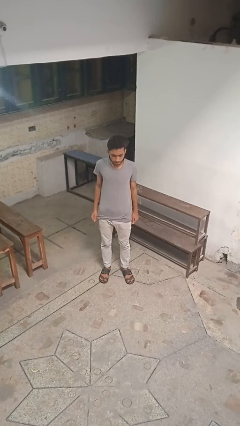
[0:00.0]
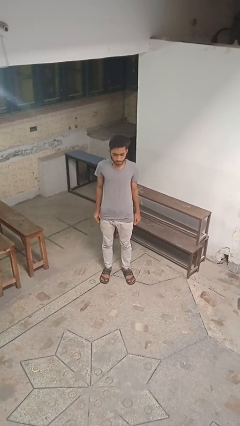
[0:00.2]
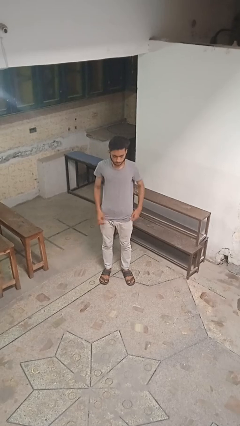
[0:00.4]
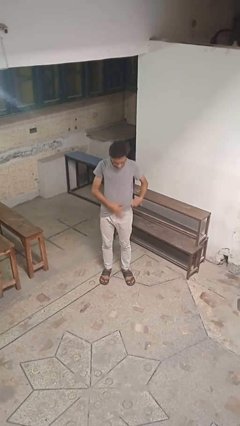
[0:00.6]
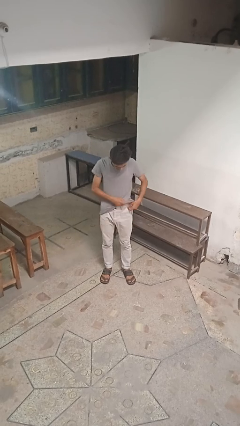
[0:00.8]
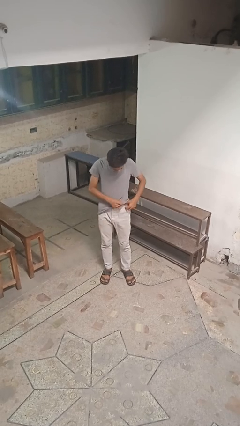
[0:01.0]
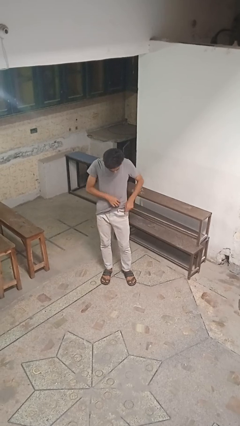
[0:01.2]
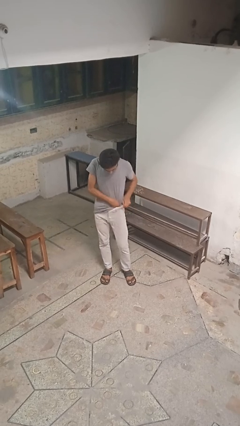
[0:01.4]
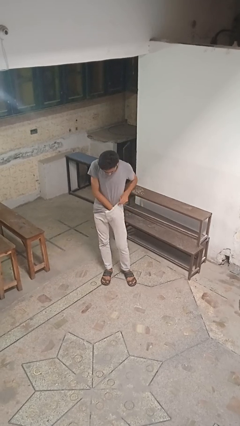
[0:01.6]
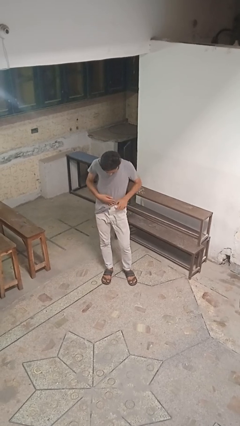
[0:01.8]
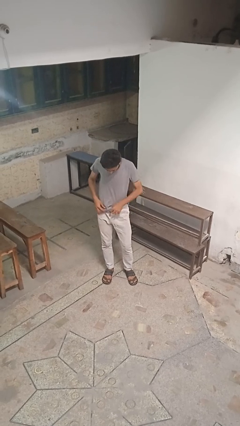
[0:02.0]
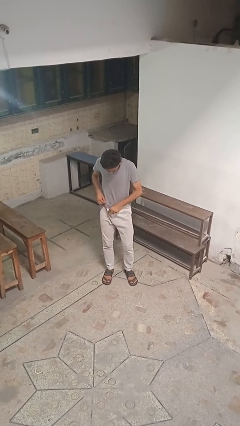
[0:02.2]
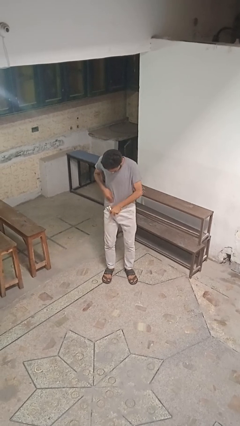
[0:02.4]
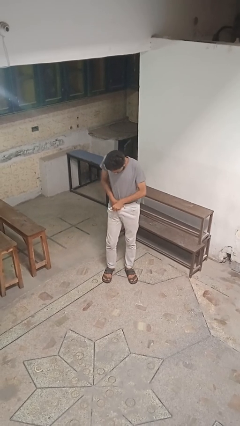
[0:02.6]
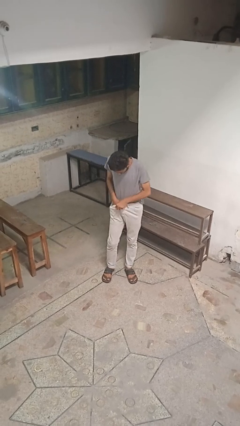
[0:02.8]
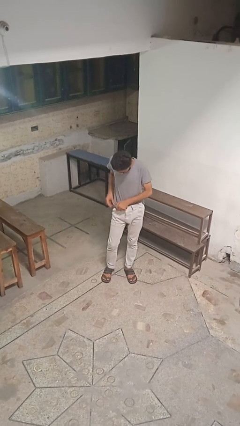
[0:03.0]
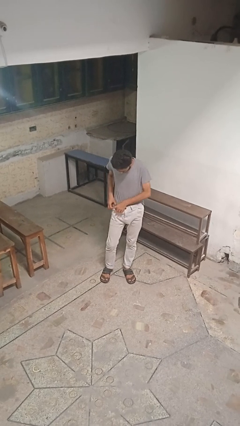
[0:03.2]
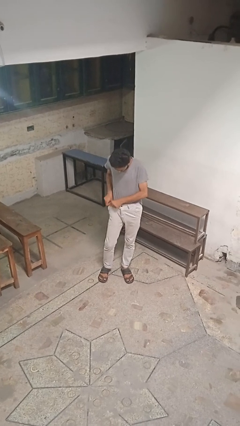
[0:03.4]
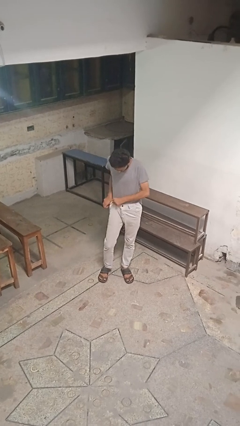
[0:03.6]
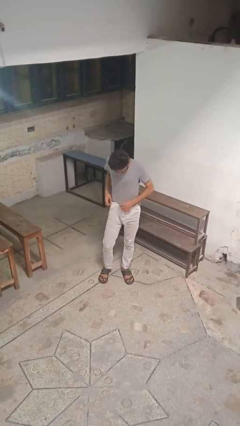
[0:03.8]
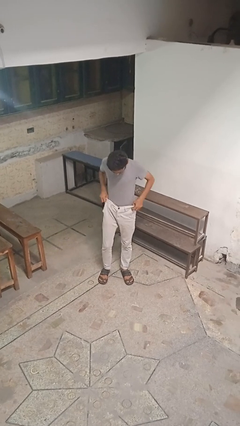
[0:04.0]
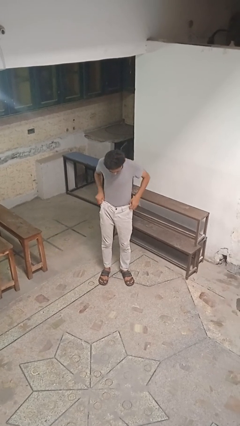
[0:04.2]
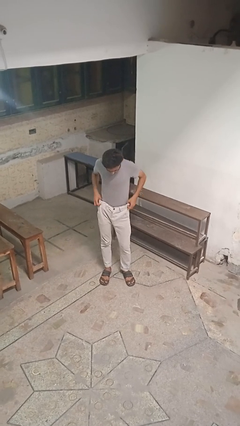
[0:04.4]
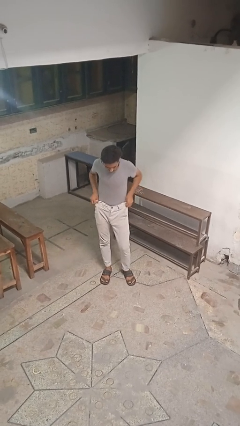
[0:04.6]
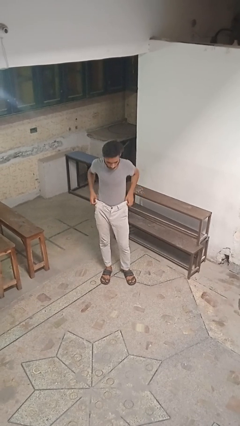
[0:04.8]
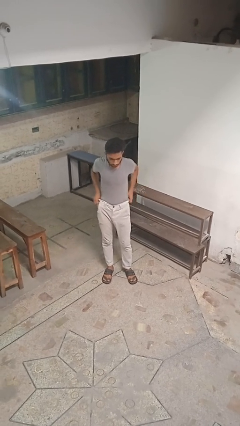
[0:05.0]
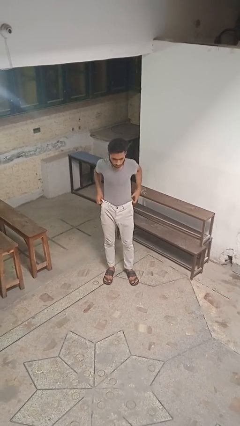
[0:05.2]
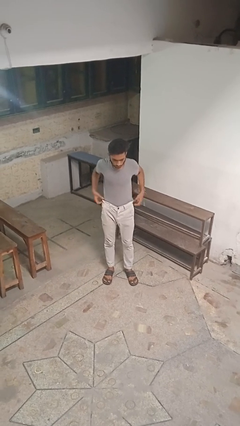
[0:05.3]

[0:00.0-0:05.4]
person tucks in shirt

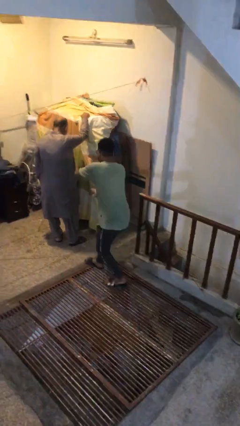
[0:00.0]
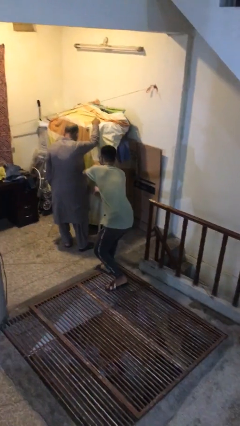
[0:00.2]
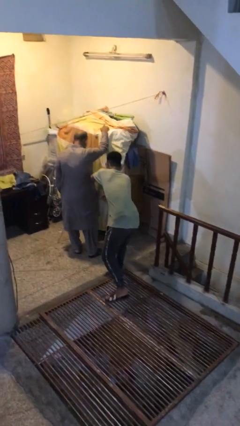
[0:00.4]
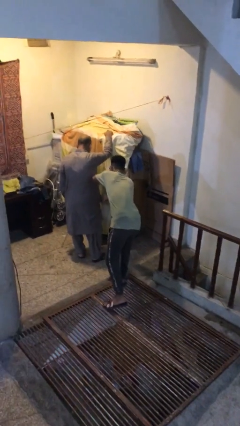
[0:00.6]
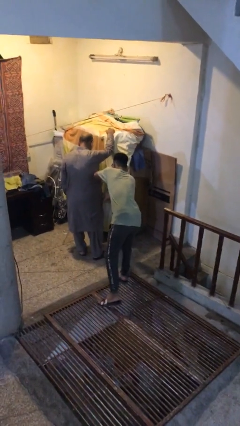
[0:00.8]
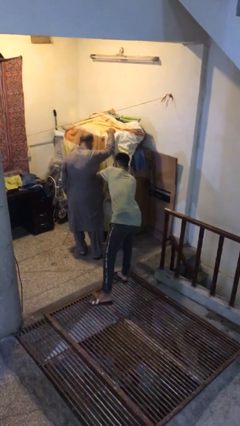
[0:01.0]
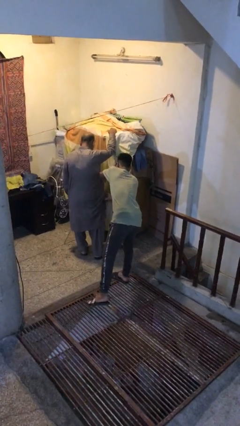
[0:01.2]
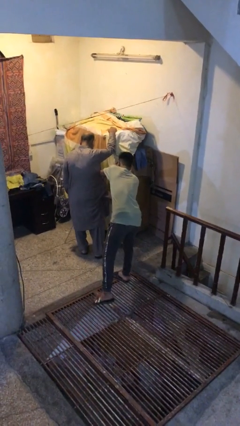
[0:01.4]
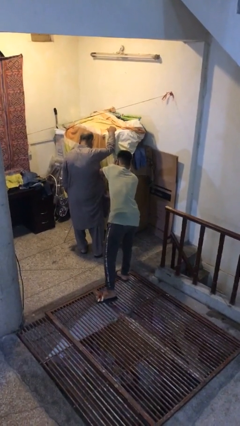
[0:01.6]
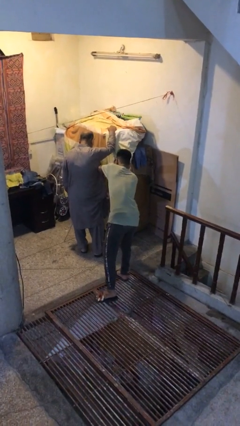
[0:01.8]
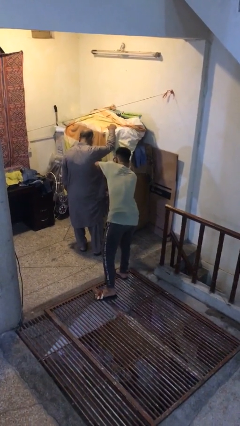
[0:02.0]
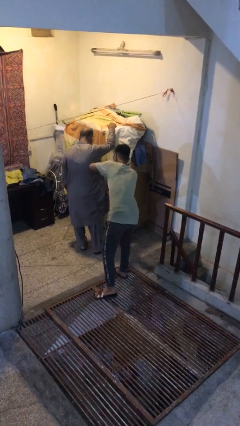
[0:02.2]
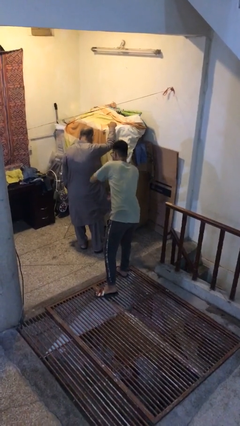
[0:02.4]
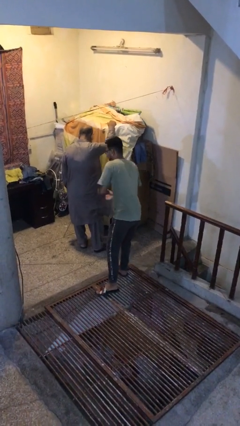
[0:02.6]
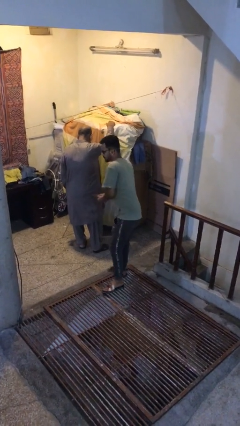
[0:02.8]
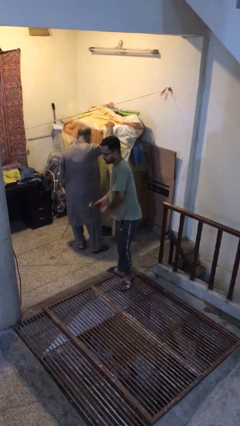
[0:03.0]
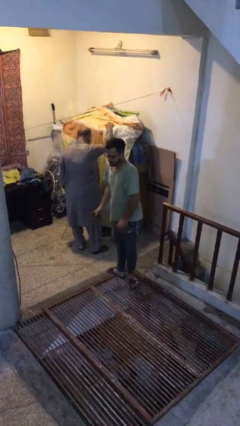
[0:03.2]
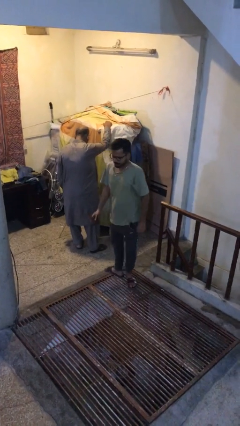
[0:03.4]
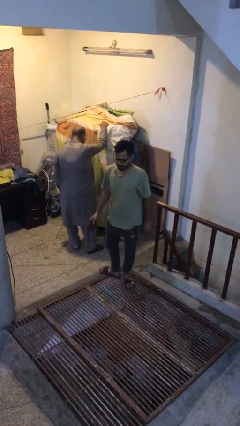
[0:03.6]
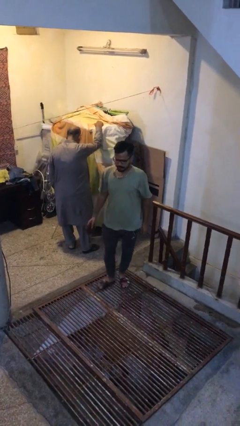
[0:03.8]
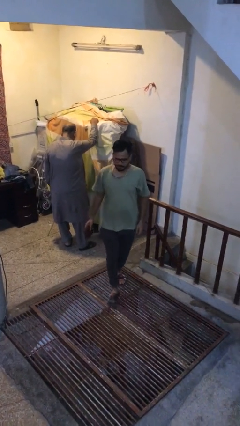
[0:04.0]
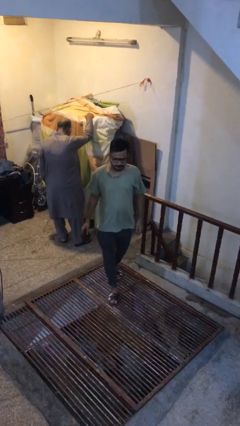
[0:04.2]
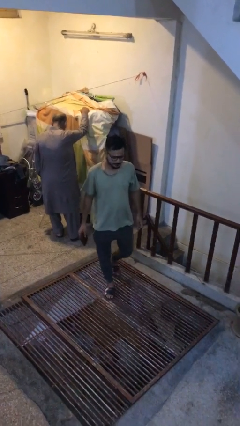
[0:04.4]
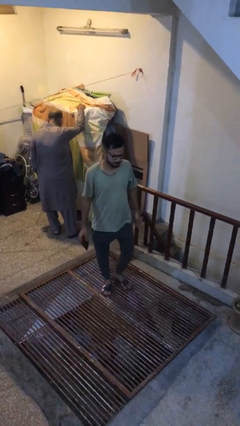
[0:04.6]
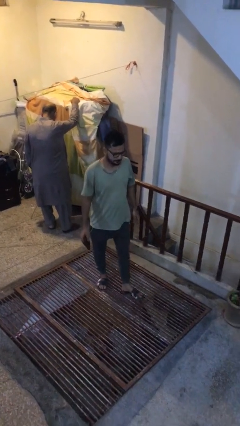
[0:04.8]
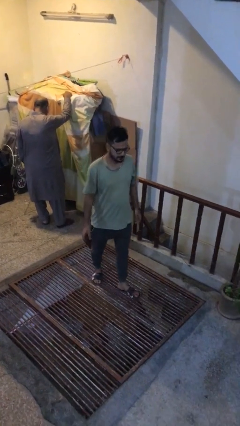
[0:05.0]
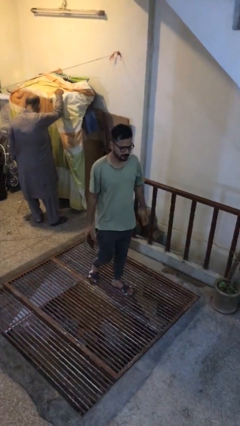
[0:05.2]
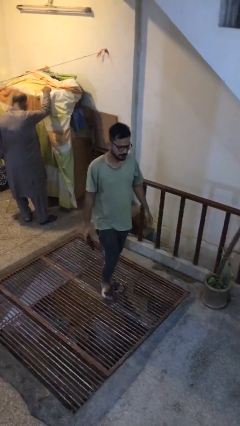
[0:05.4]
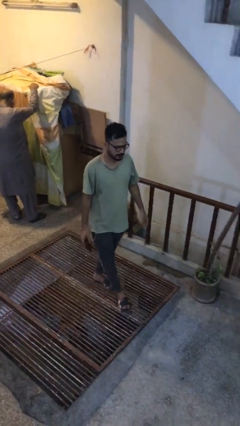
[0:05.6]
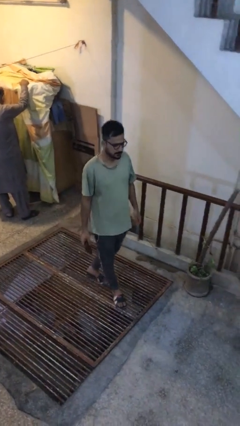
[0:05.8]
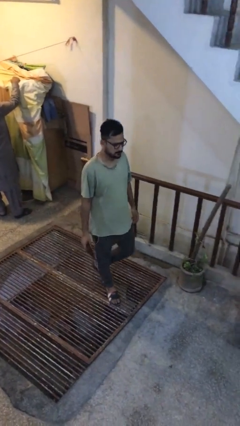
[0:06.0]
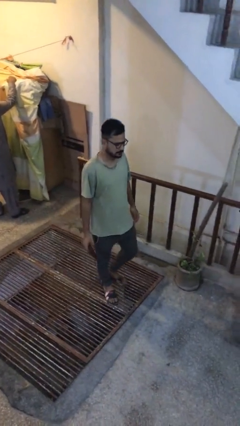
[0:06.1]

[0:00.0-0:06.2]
person steals object from person

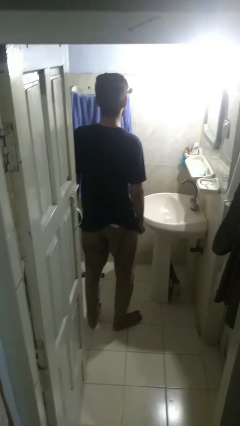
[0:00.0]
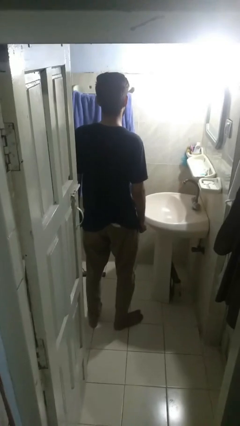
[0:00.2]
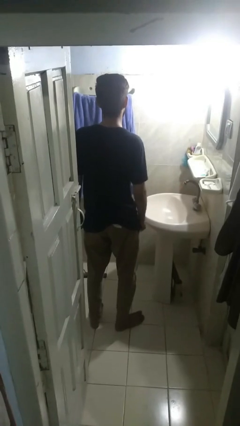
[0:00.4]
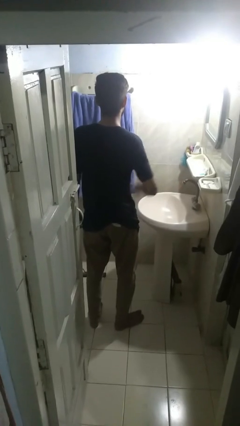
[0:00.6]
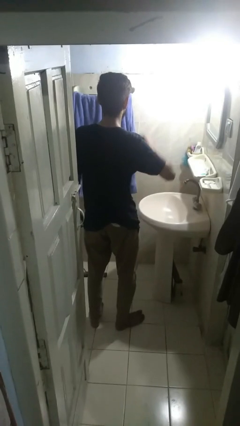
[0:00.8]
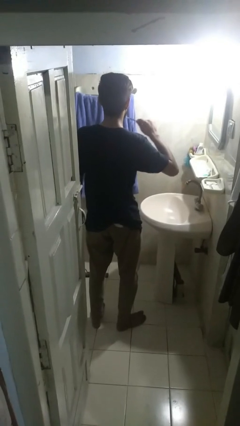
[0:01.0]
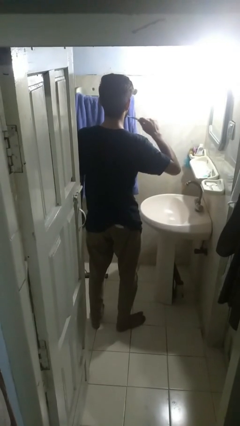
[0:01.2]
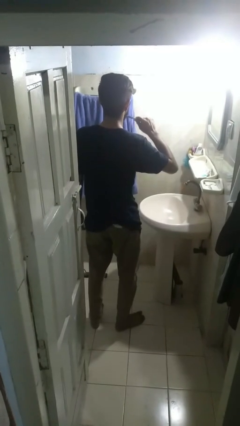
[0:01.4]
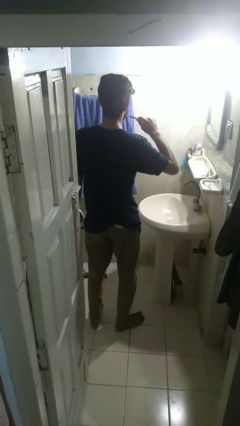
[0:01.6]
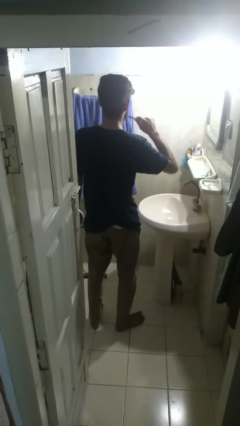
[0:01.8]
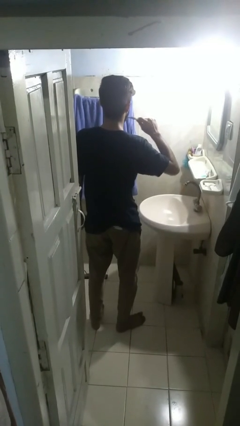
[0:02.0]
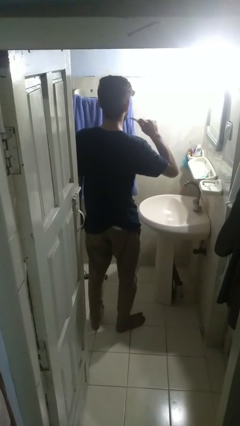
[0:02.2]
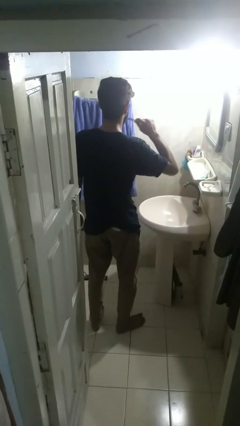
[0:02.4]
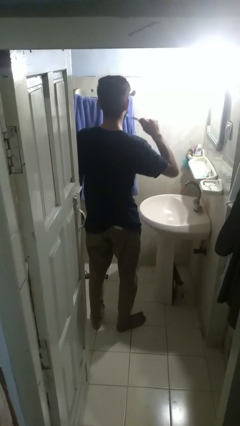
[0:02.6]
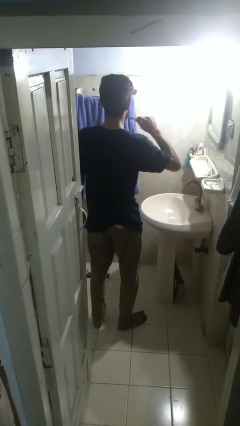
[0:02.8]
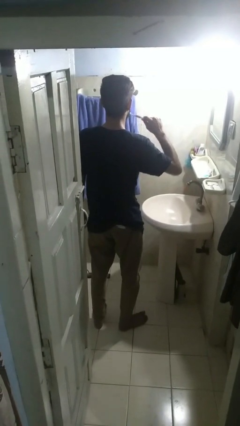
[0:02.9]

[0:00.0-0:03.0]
person brushes teeth

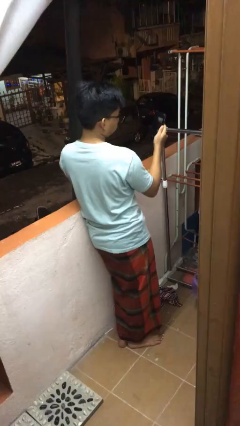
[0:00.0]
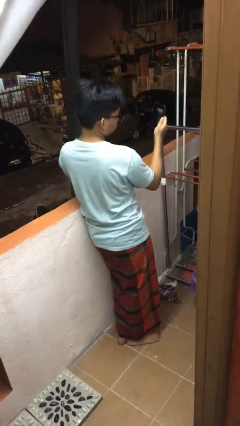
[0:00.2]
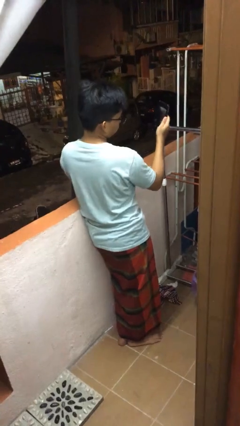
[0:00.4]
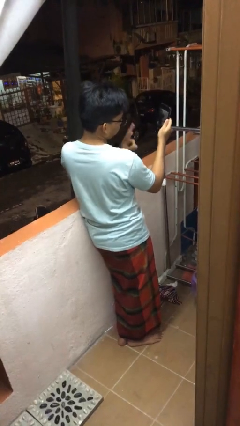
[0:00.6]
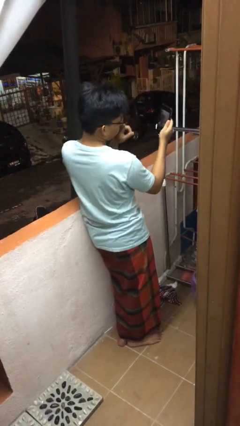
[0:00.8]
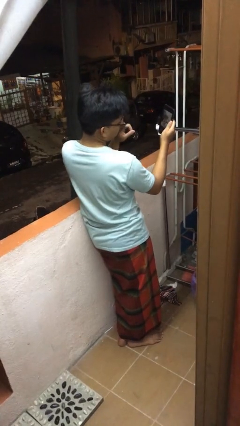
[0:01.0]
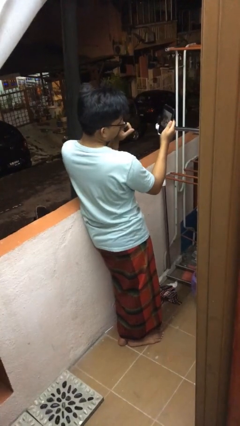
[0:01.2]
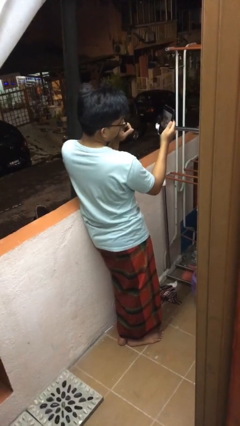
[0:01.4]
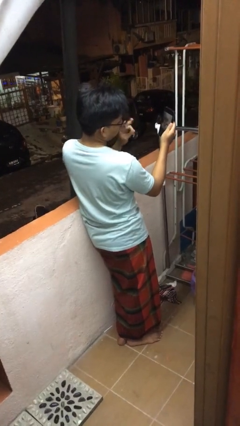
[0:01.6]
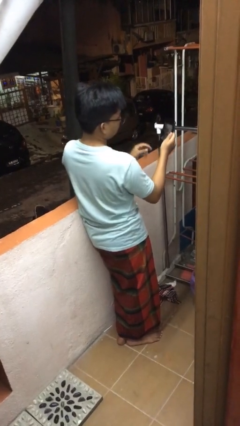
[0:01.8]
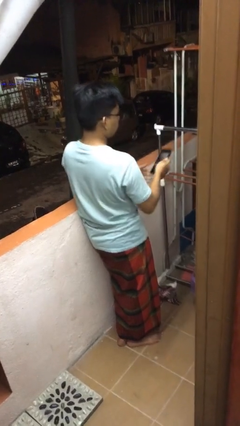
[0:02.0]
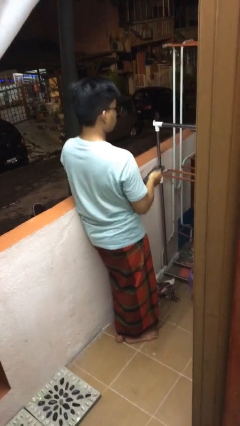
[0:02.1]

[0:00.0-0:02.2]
person takes selfie

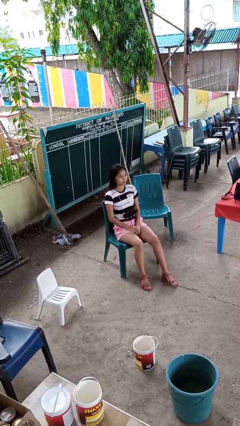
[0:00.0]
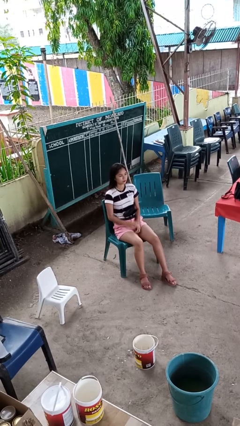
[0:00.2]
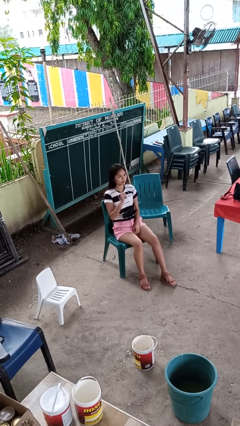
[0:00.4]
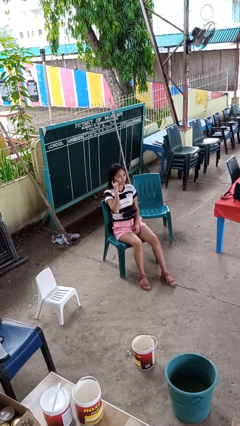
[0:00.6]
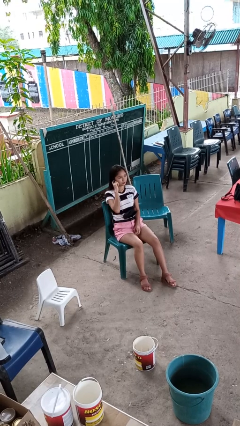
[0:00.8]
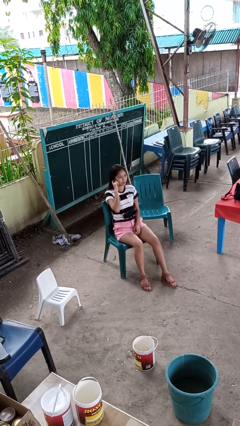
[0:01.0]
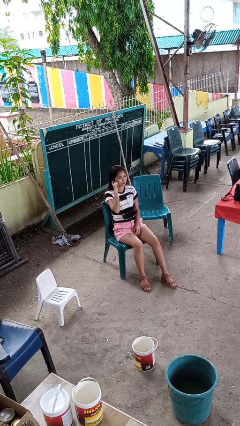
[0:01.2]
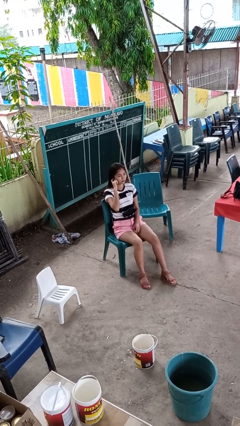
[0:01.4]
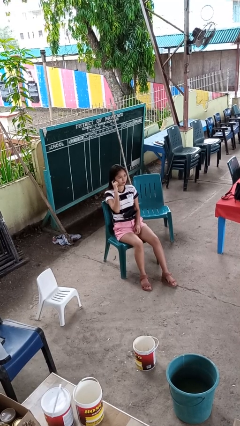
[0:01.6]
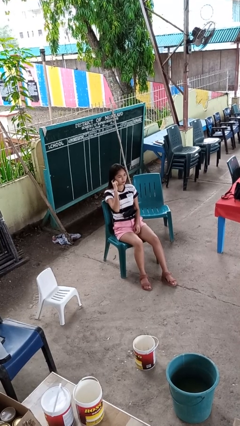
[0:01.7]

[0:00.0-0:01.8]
person gestures listen closely
